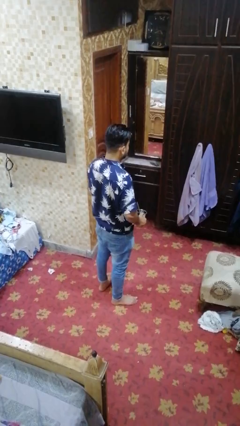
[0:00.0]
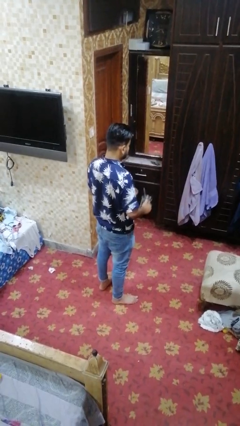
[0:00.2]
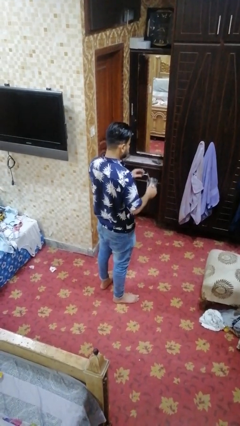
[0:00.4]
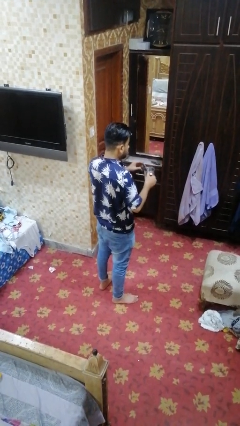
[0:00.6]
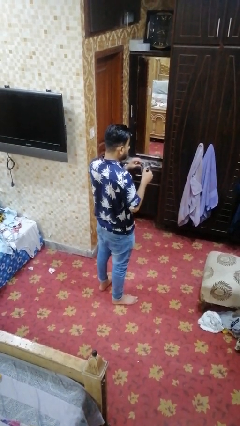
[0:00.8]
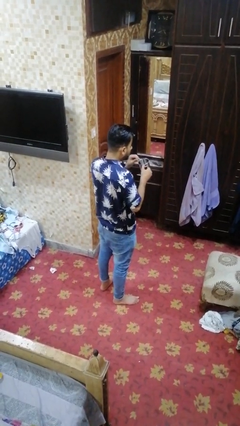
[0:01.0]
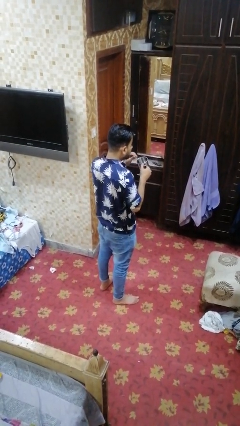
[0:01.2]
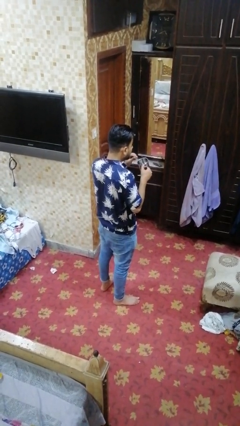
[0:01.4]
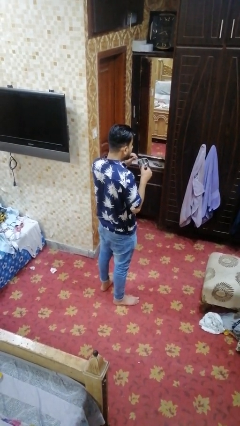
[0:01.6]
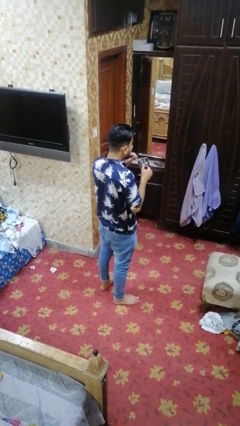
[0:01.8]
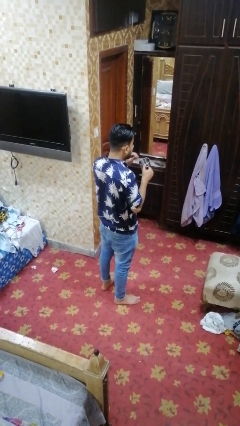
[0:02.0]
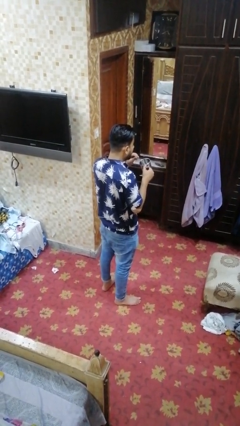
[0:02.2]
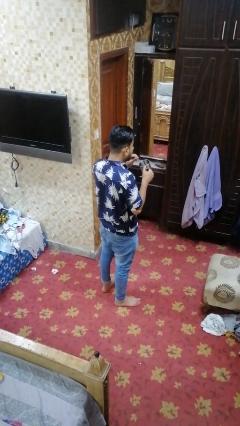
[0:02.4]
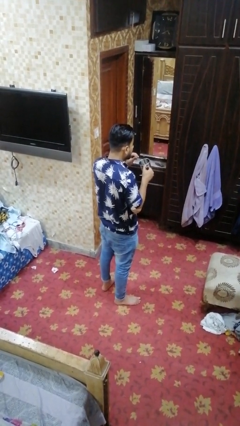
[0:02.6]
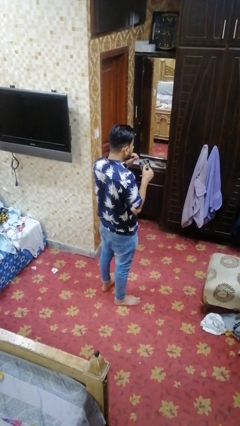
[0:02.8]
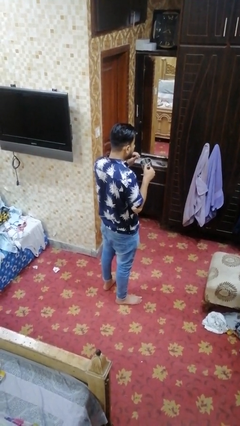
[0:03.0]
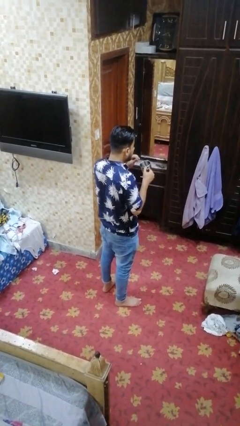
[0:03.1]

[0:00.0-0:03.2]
person drinks from straw

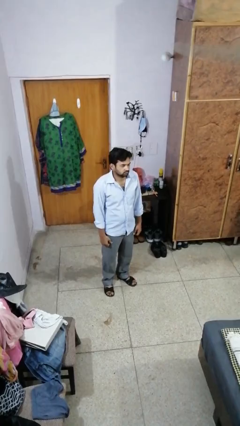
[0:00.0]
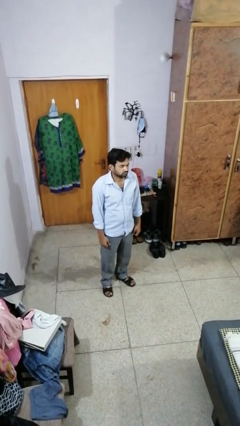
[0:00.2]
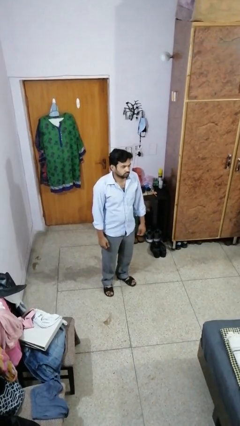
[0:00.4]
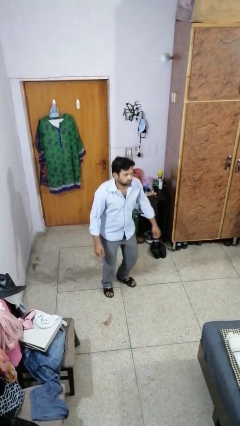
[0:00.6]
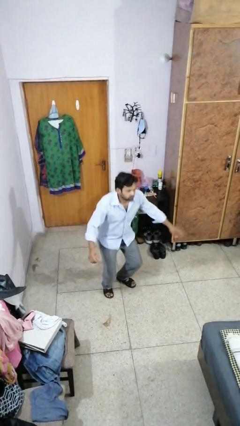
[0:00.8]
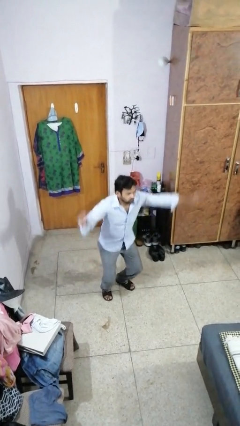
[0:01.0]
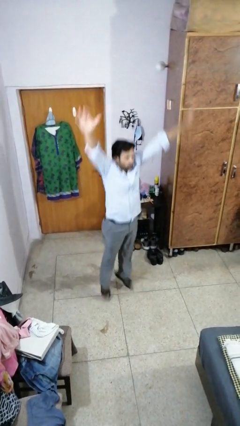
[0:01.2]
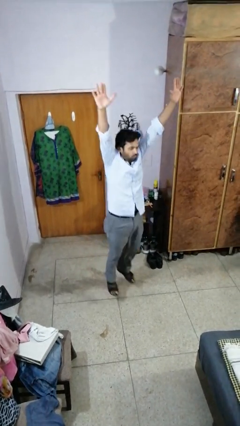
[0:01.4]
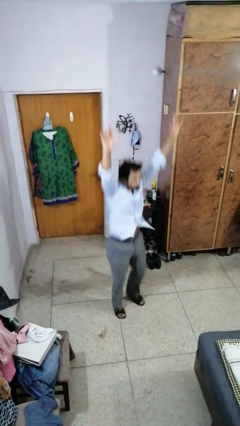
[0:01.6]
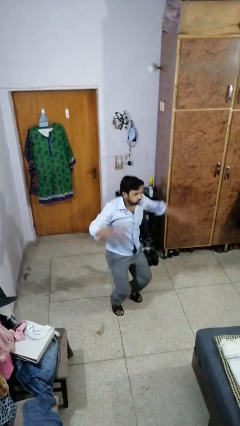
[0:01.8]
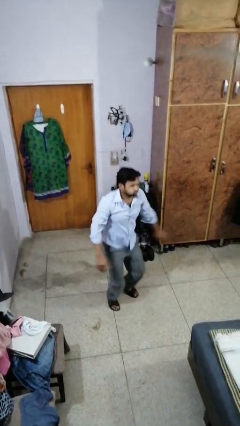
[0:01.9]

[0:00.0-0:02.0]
person jumps

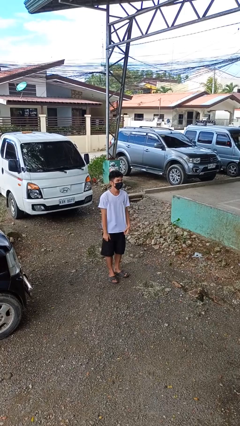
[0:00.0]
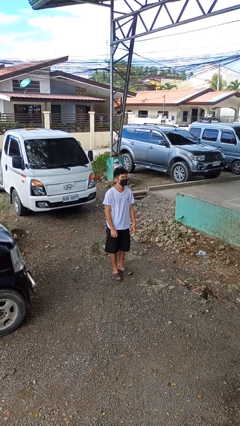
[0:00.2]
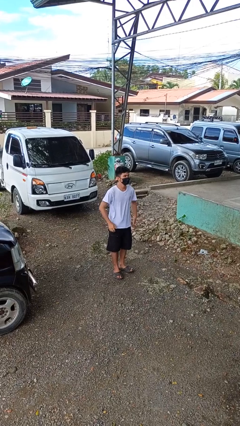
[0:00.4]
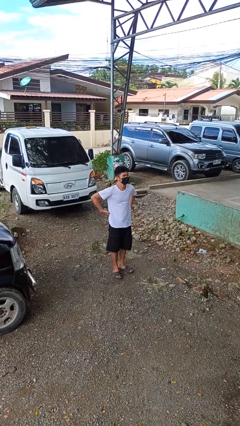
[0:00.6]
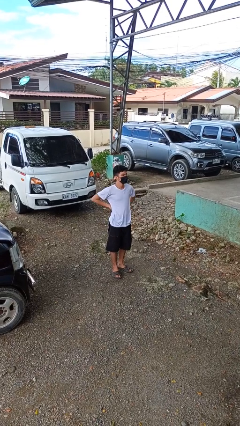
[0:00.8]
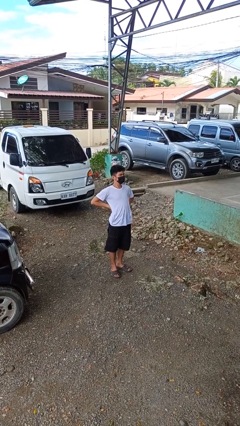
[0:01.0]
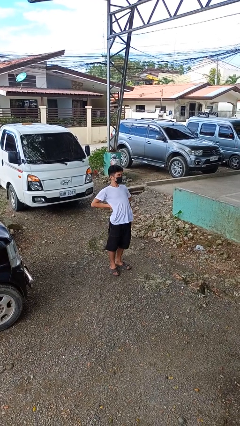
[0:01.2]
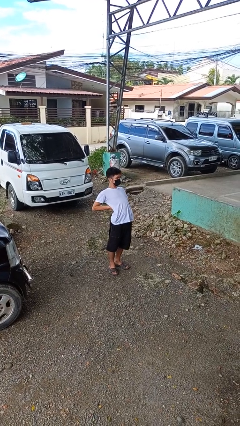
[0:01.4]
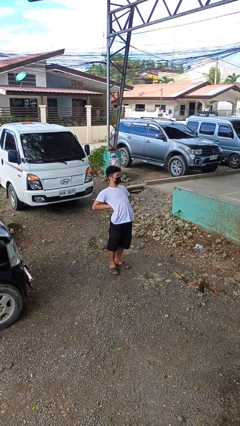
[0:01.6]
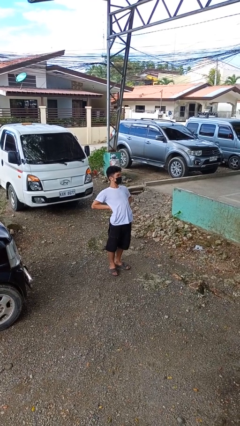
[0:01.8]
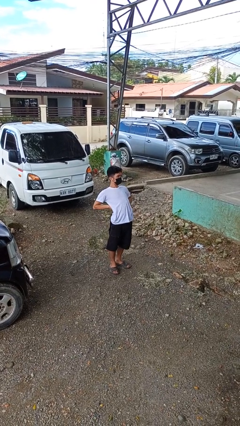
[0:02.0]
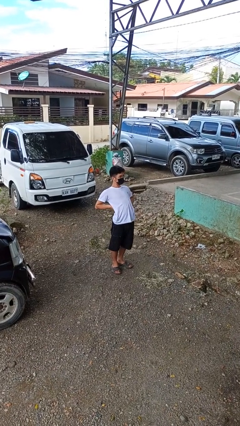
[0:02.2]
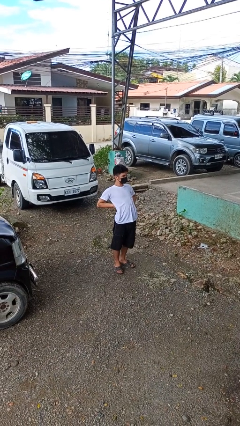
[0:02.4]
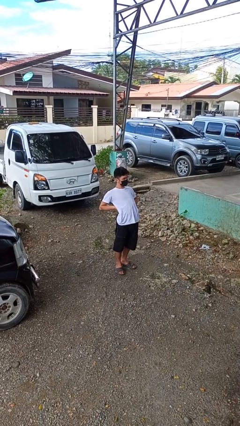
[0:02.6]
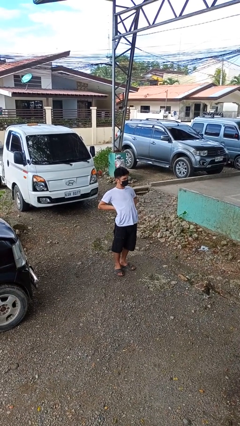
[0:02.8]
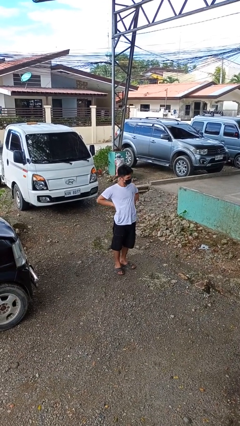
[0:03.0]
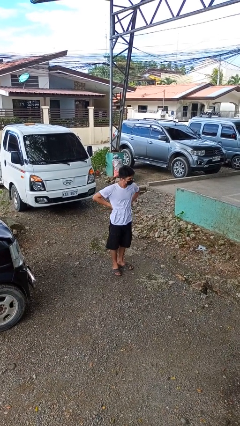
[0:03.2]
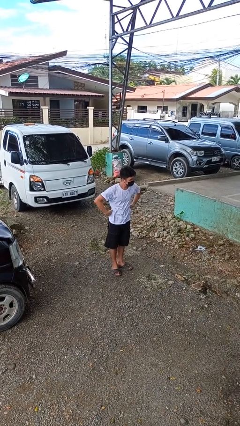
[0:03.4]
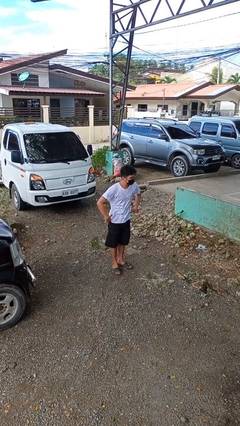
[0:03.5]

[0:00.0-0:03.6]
person stretches back

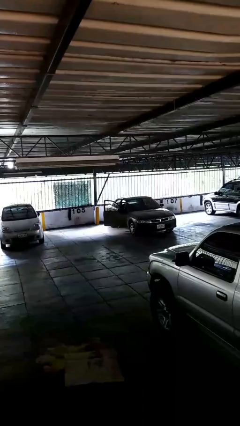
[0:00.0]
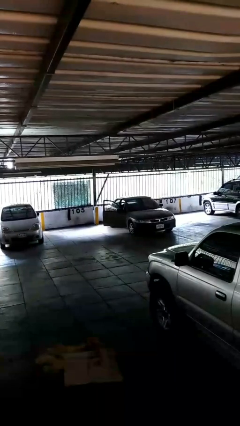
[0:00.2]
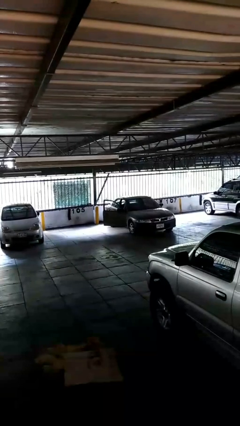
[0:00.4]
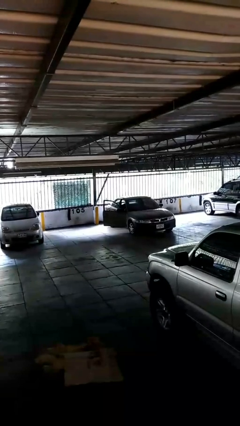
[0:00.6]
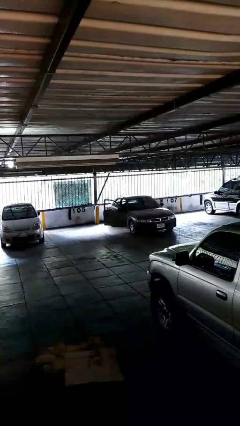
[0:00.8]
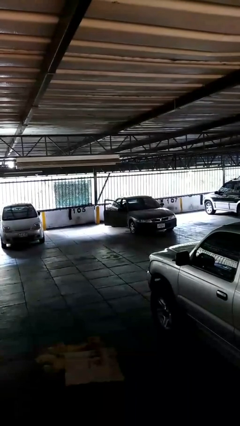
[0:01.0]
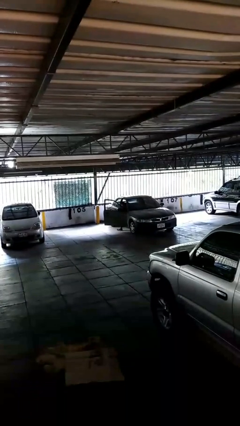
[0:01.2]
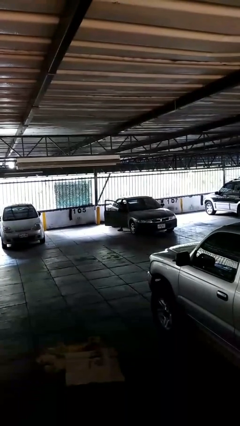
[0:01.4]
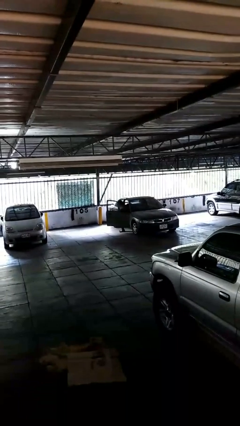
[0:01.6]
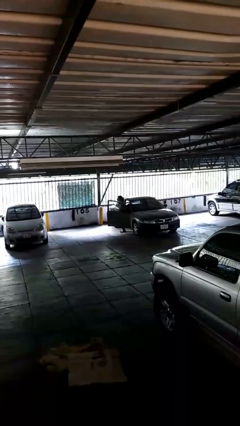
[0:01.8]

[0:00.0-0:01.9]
person enters car

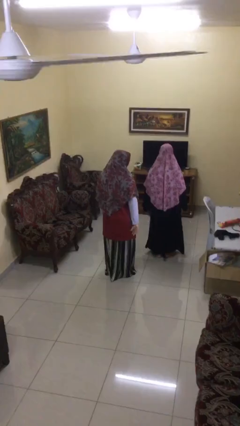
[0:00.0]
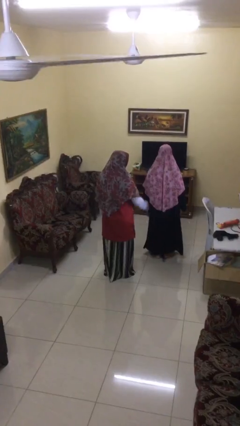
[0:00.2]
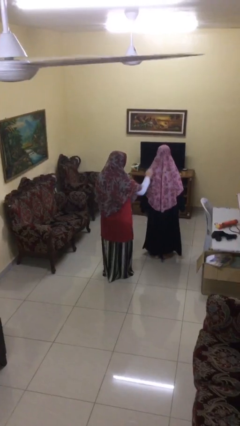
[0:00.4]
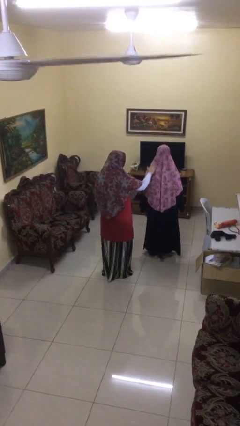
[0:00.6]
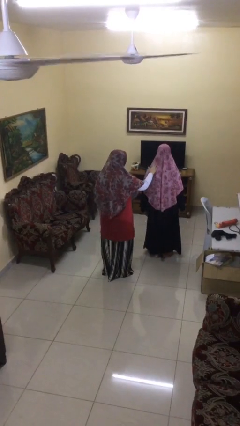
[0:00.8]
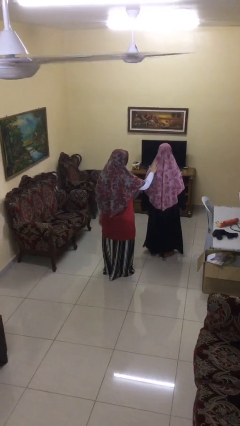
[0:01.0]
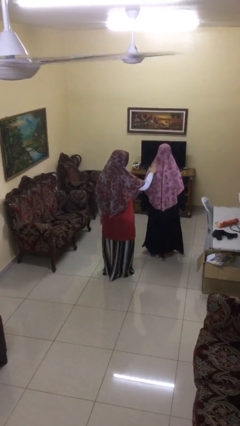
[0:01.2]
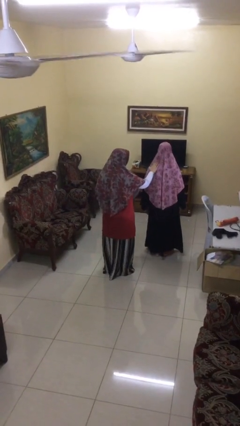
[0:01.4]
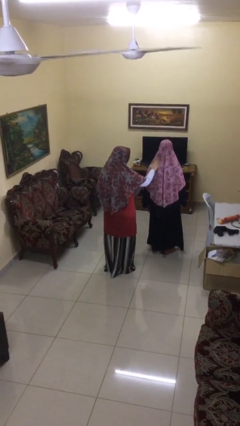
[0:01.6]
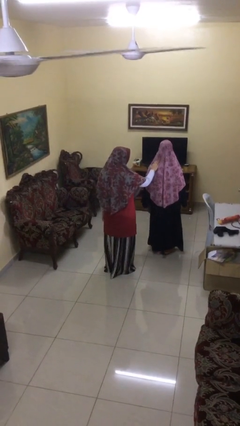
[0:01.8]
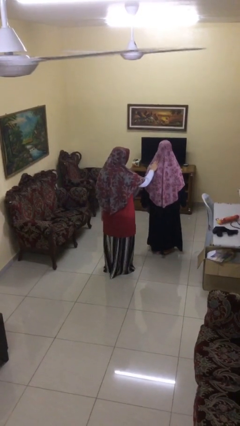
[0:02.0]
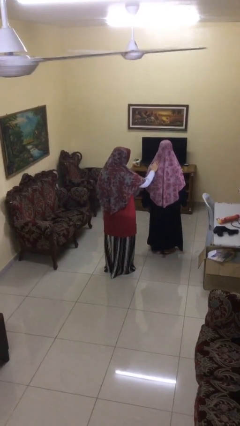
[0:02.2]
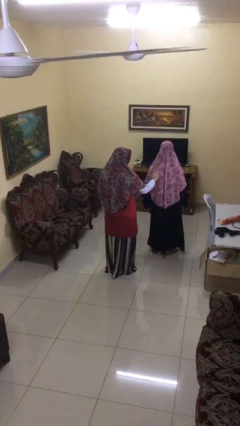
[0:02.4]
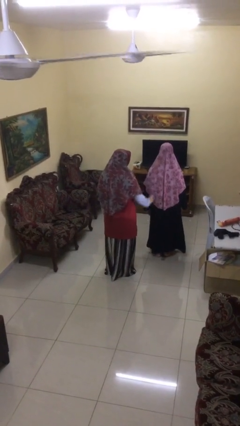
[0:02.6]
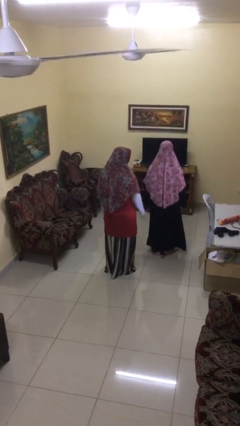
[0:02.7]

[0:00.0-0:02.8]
person touches back of person

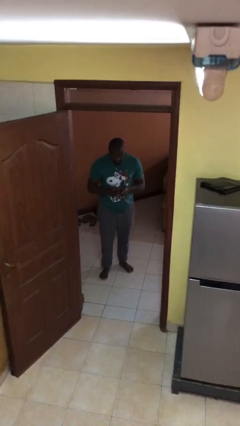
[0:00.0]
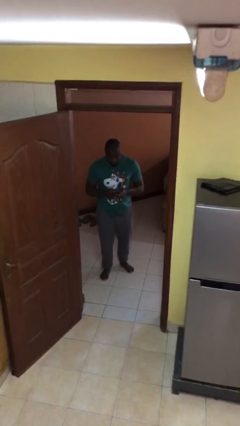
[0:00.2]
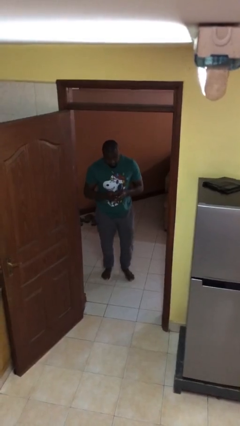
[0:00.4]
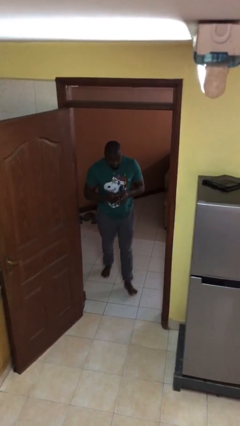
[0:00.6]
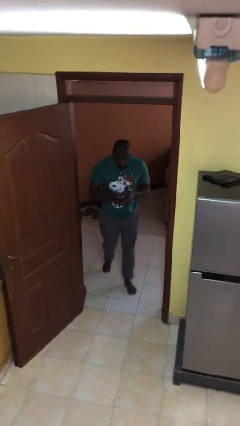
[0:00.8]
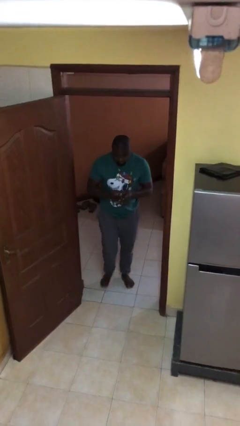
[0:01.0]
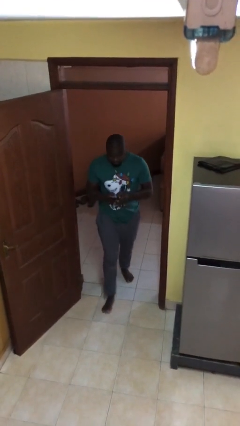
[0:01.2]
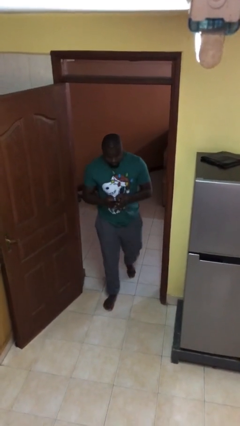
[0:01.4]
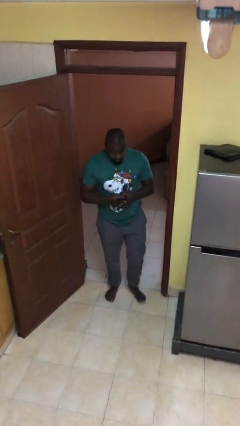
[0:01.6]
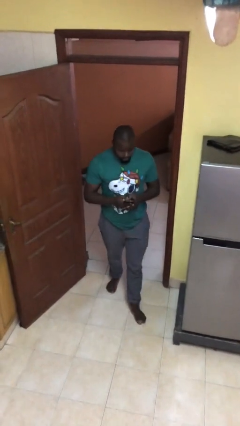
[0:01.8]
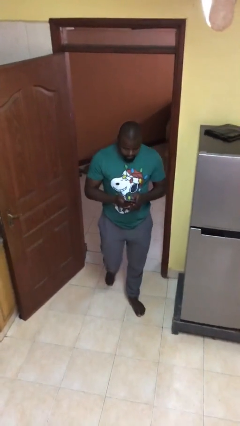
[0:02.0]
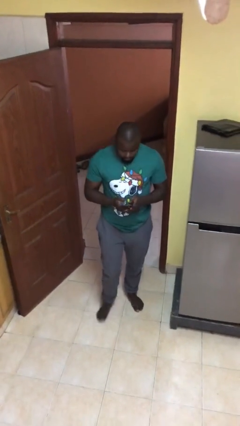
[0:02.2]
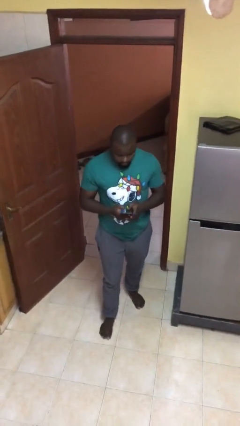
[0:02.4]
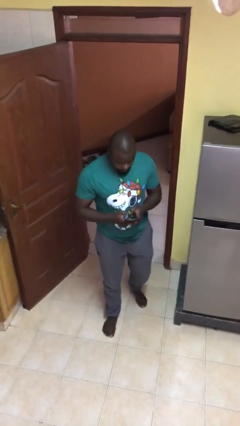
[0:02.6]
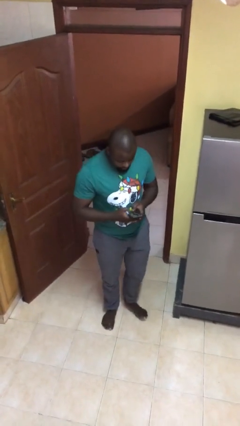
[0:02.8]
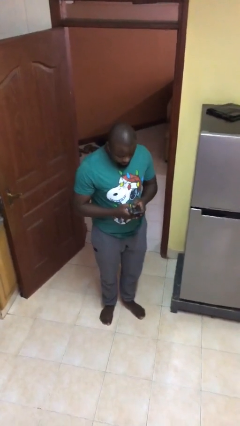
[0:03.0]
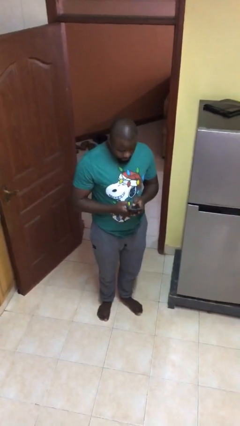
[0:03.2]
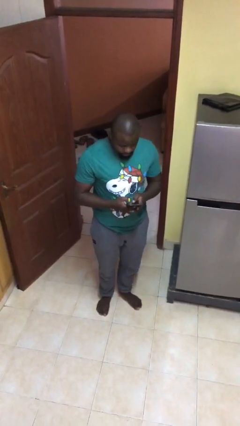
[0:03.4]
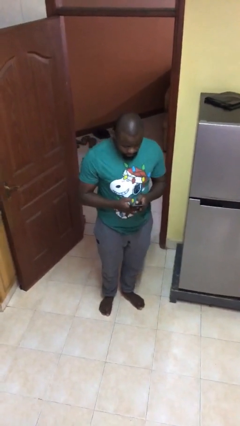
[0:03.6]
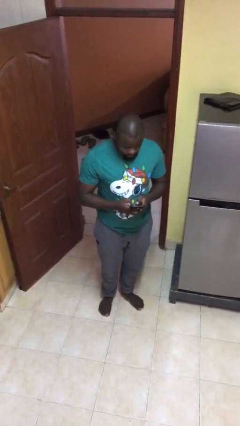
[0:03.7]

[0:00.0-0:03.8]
person enters scene through structure

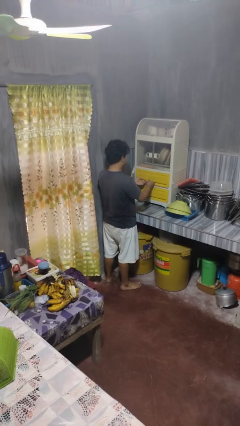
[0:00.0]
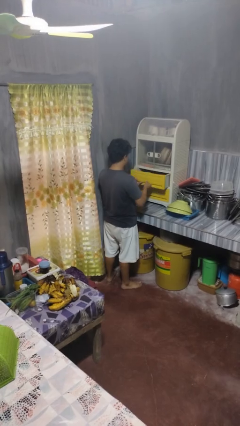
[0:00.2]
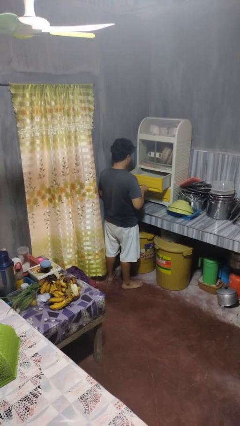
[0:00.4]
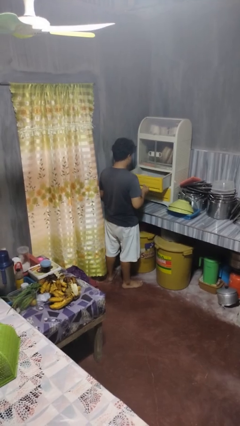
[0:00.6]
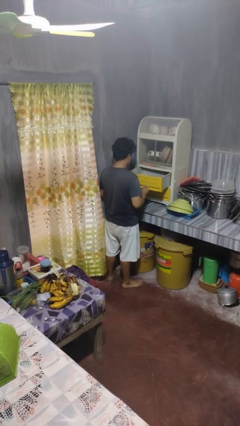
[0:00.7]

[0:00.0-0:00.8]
person opens kitchen drawer
